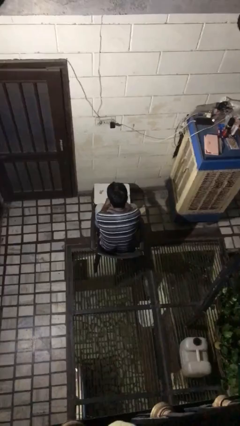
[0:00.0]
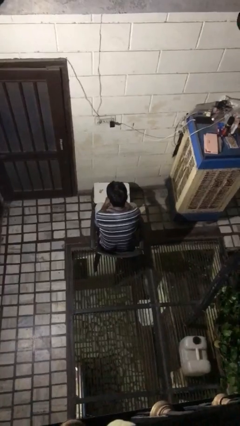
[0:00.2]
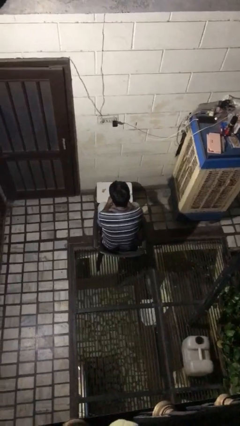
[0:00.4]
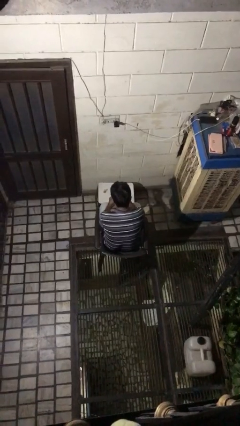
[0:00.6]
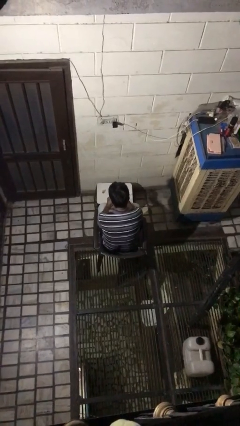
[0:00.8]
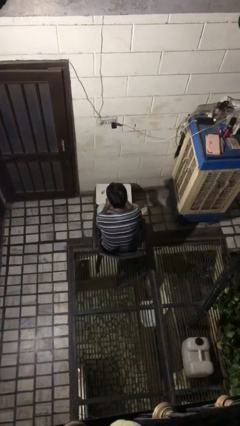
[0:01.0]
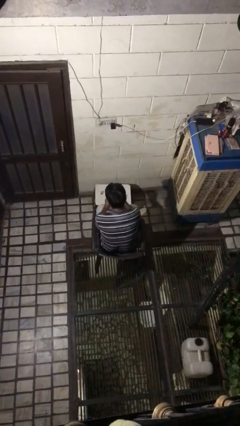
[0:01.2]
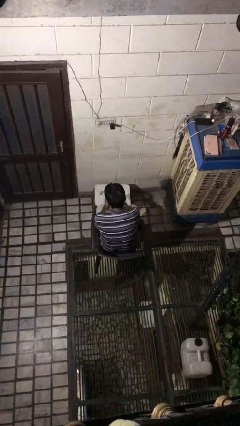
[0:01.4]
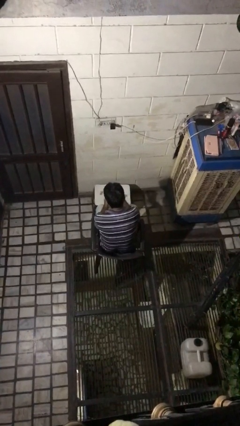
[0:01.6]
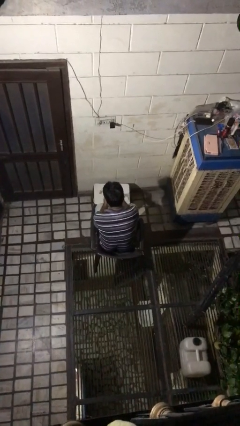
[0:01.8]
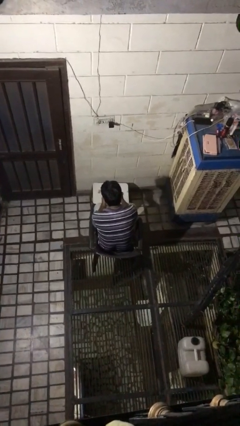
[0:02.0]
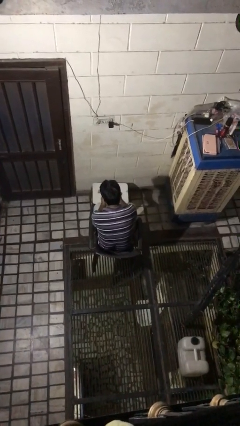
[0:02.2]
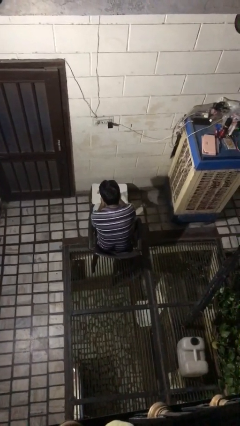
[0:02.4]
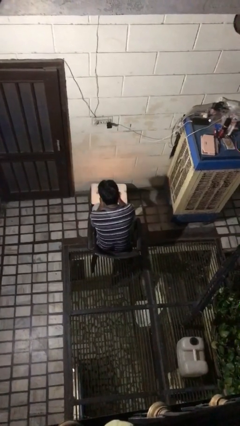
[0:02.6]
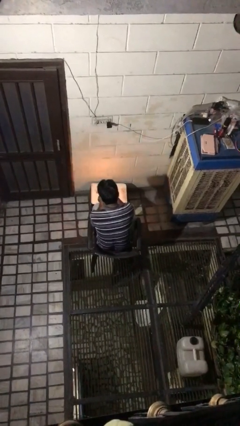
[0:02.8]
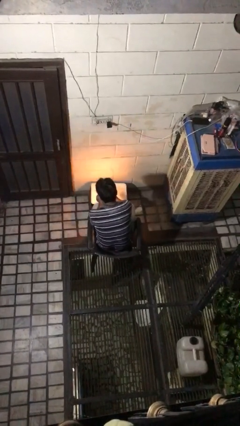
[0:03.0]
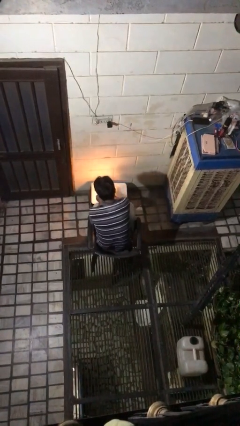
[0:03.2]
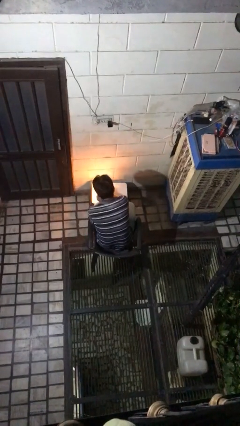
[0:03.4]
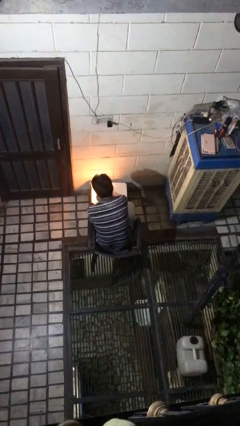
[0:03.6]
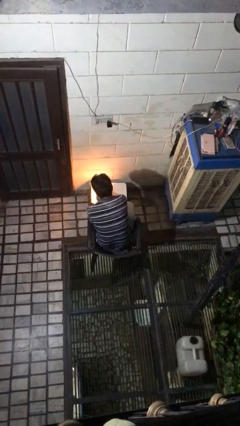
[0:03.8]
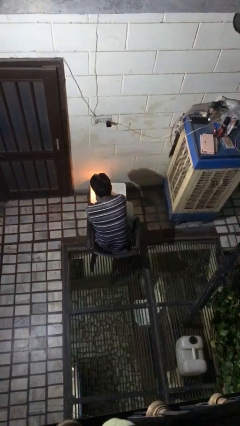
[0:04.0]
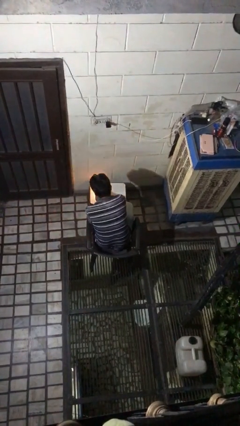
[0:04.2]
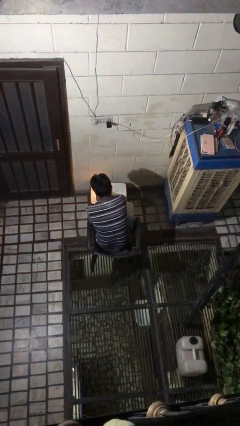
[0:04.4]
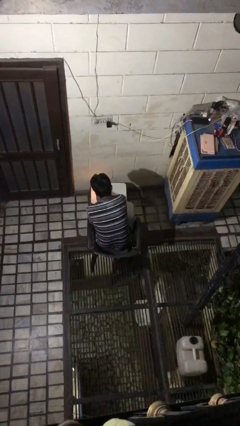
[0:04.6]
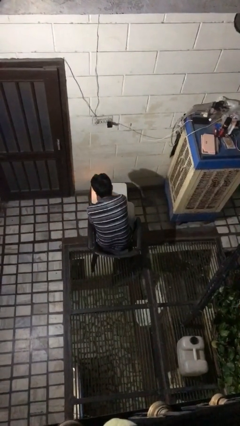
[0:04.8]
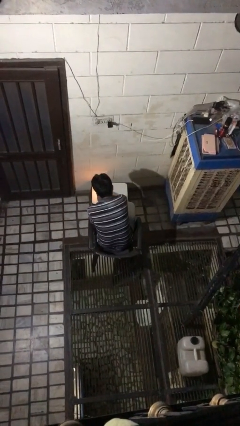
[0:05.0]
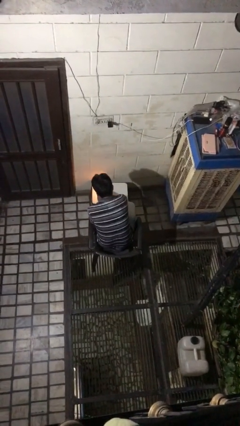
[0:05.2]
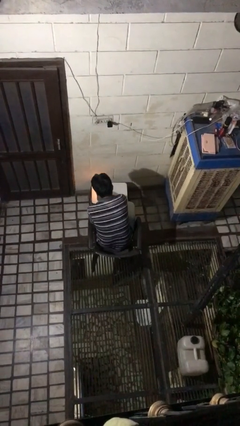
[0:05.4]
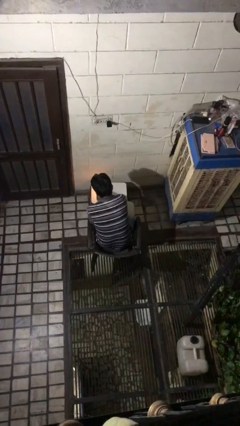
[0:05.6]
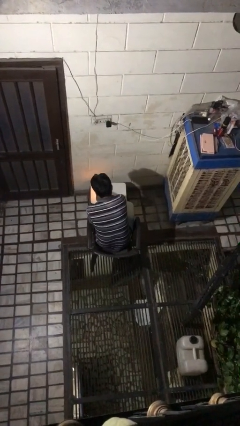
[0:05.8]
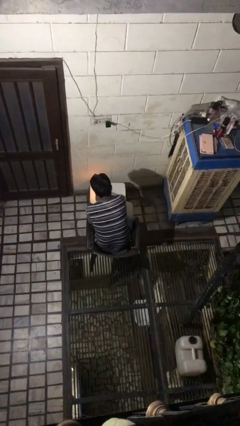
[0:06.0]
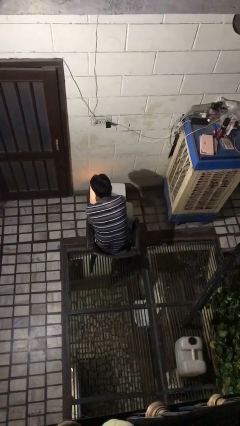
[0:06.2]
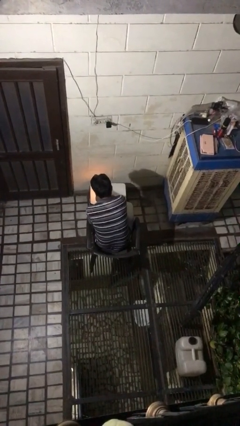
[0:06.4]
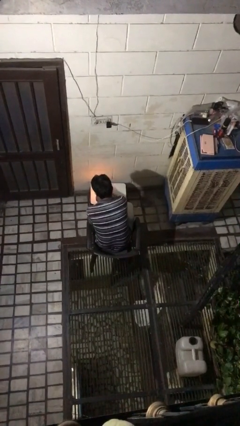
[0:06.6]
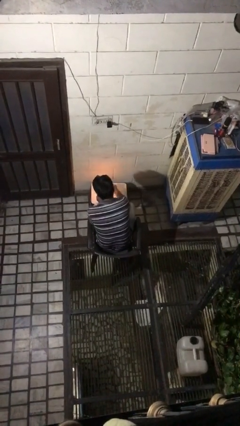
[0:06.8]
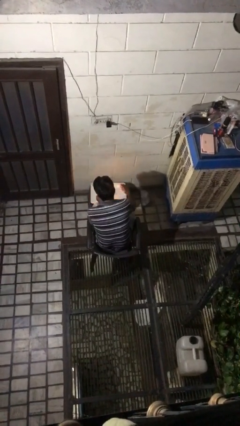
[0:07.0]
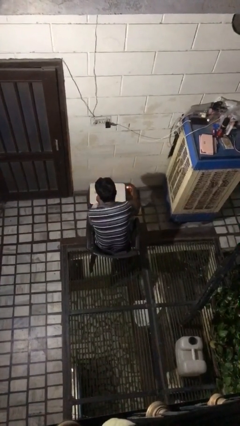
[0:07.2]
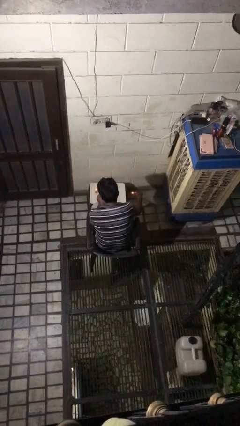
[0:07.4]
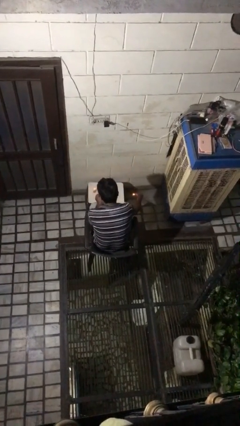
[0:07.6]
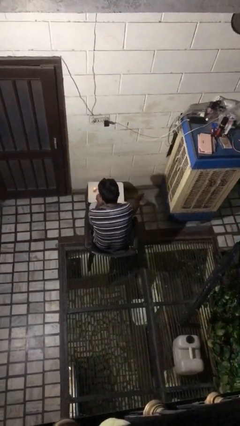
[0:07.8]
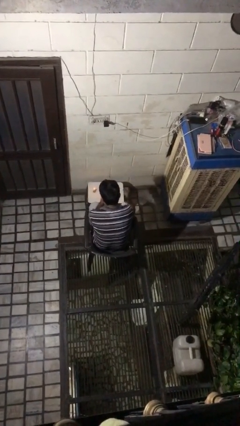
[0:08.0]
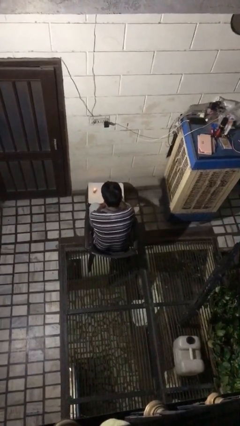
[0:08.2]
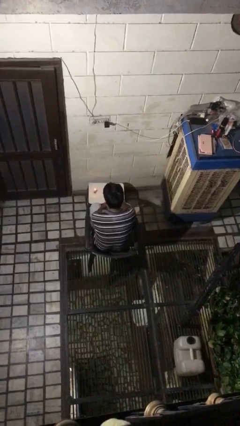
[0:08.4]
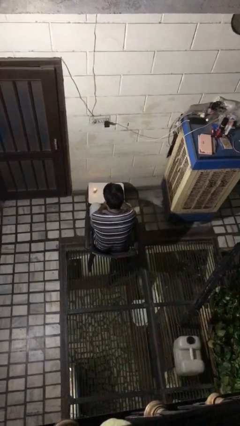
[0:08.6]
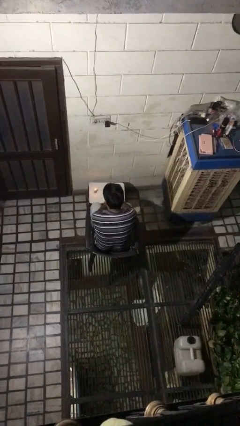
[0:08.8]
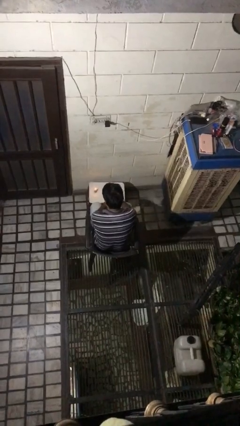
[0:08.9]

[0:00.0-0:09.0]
person lights candle

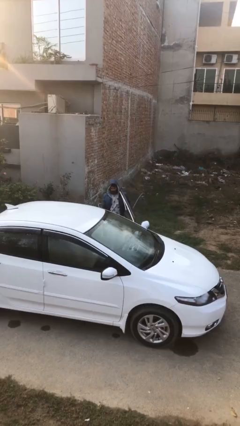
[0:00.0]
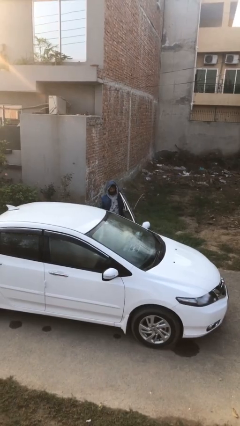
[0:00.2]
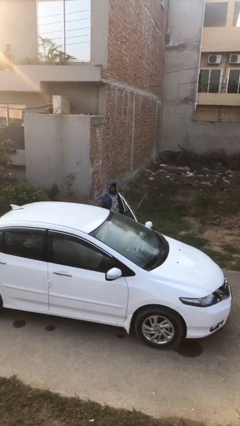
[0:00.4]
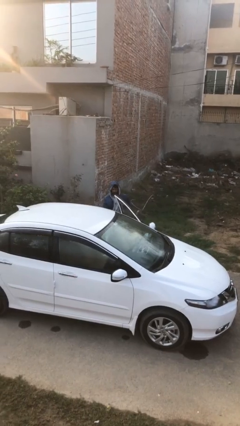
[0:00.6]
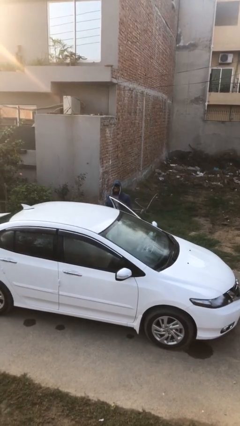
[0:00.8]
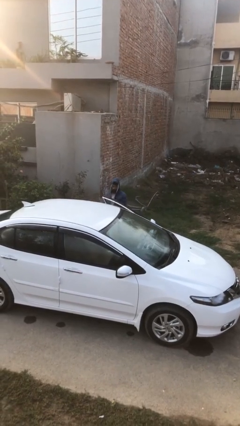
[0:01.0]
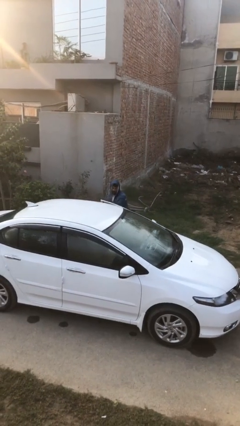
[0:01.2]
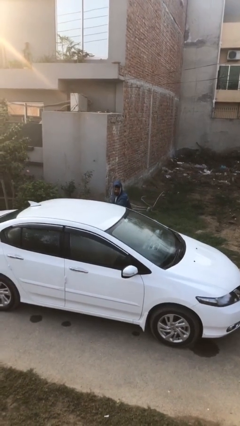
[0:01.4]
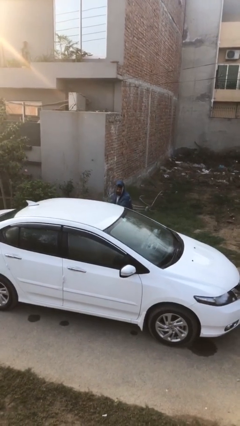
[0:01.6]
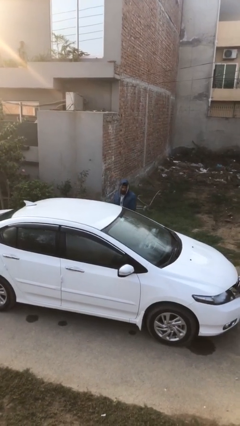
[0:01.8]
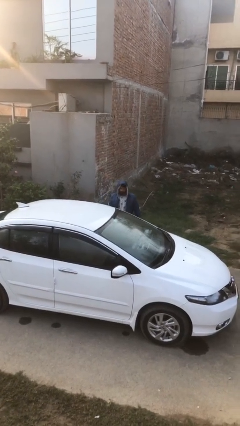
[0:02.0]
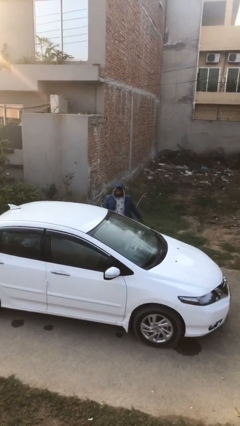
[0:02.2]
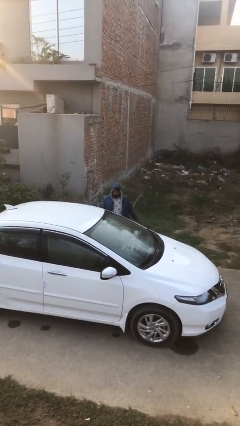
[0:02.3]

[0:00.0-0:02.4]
person closes car door

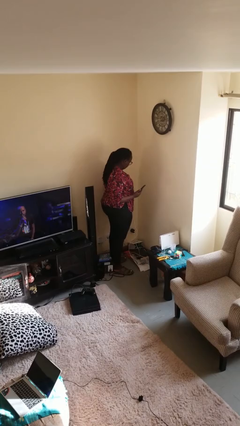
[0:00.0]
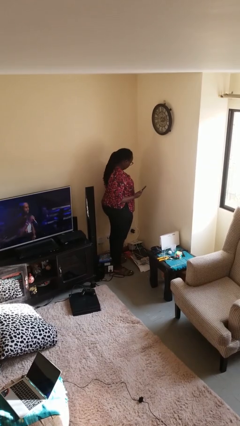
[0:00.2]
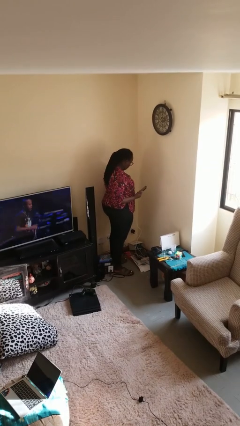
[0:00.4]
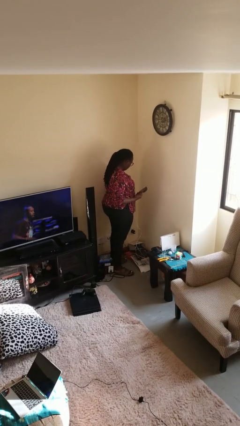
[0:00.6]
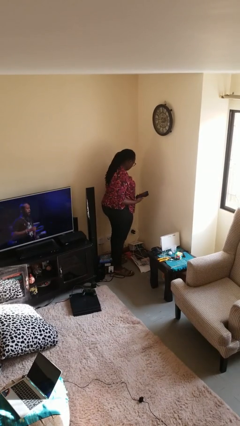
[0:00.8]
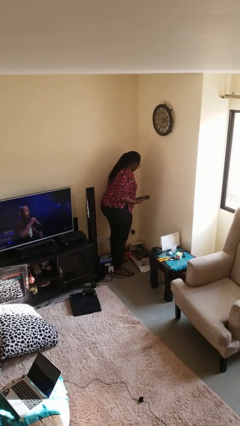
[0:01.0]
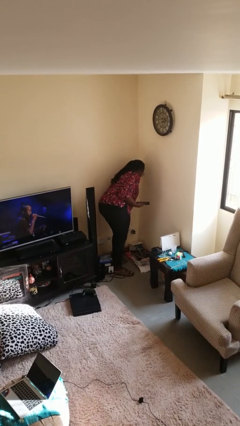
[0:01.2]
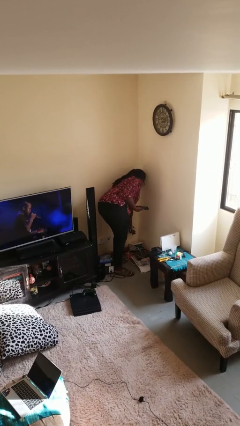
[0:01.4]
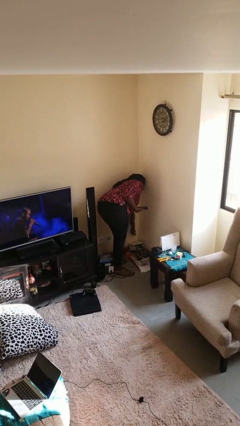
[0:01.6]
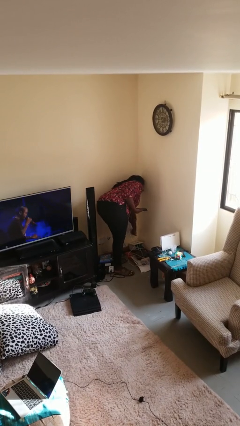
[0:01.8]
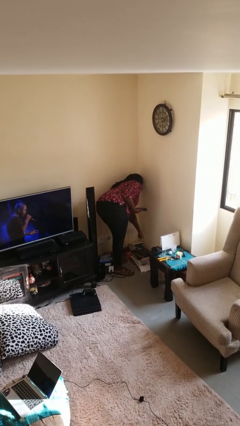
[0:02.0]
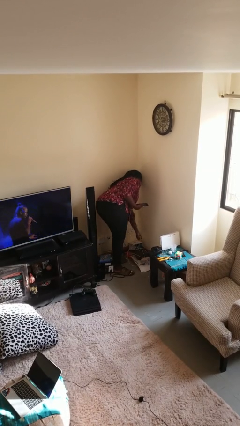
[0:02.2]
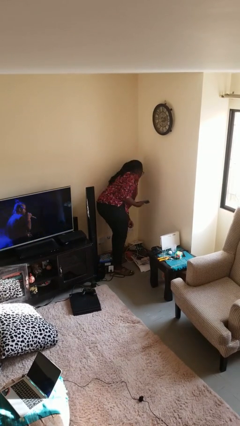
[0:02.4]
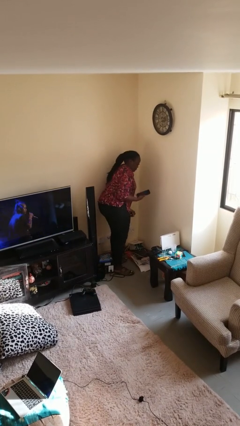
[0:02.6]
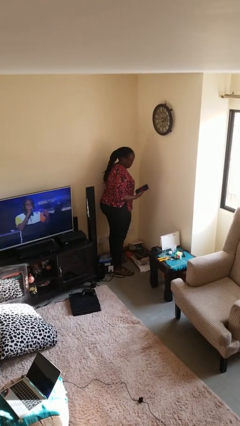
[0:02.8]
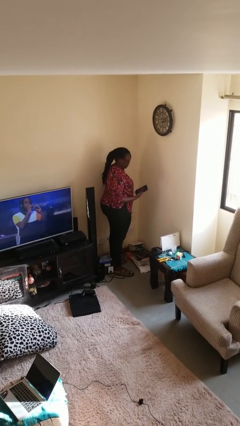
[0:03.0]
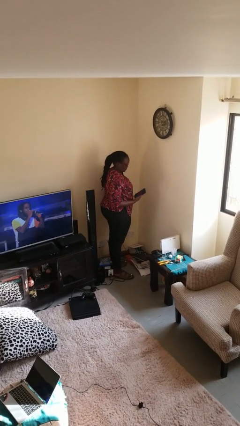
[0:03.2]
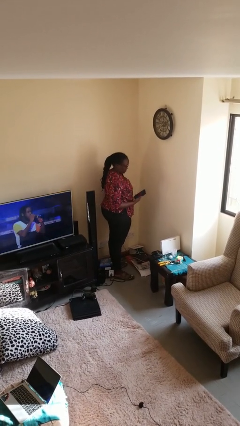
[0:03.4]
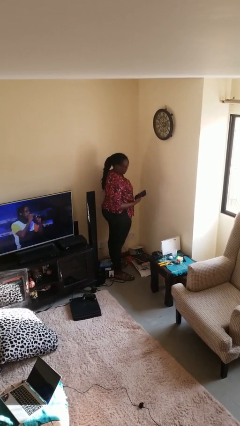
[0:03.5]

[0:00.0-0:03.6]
person unplugs from electrical socket

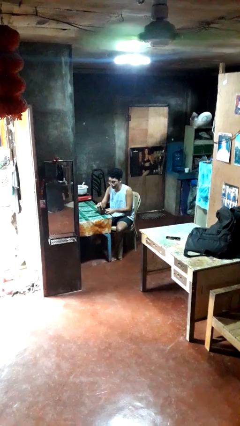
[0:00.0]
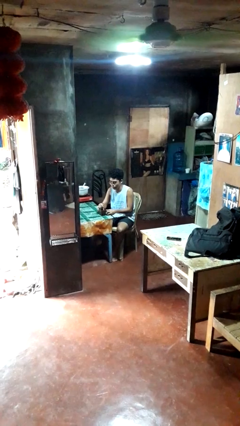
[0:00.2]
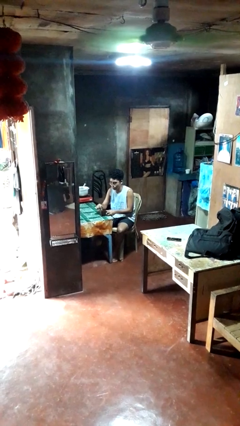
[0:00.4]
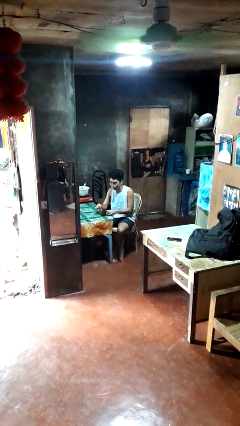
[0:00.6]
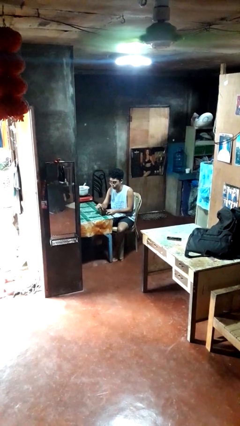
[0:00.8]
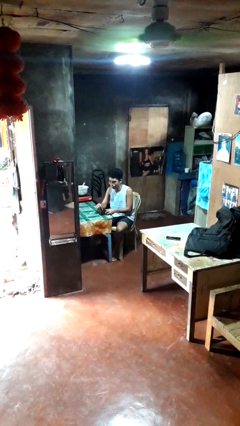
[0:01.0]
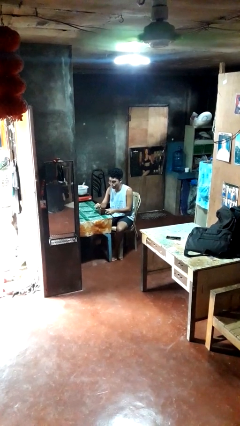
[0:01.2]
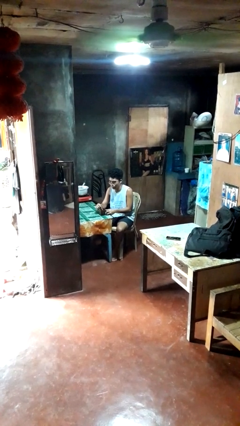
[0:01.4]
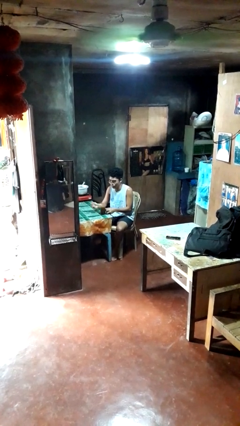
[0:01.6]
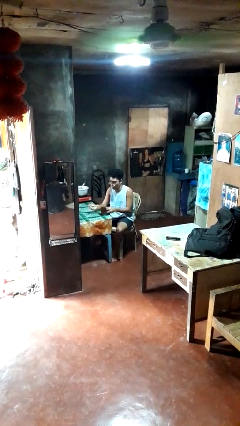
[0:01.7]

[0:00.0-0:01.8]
person stirs mug

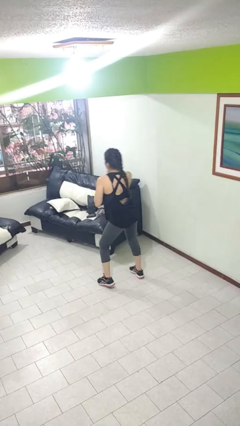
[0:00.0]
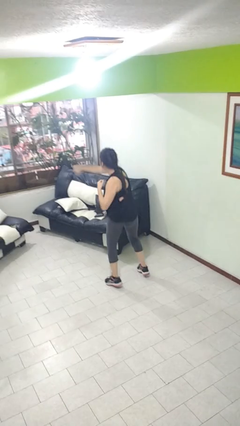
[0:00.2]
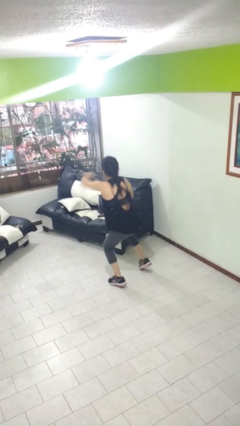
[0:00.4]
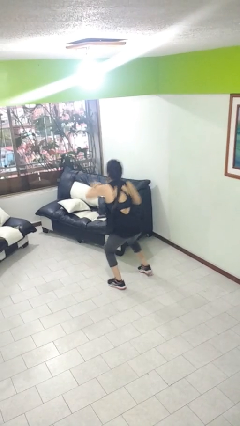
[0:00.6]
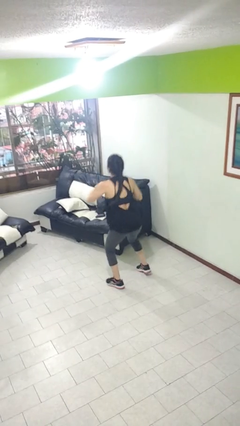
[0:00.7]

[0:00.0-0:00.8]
person punches
